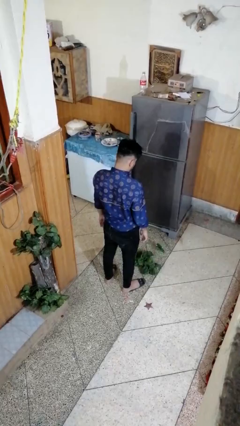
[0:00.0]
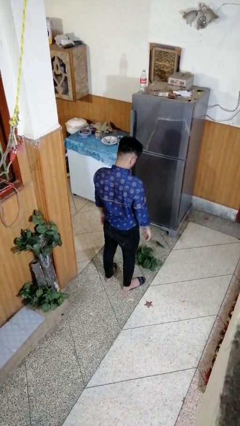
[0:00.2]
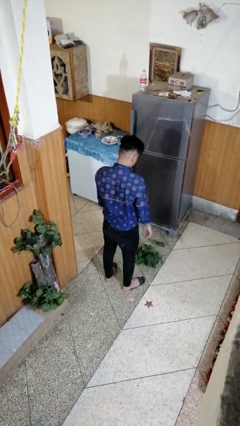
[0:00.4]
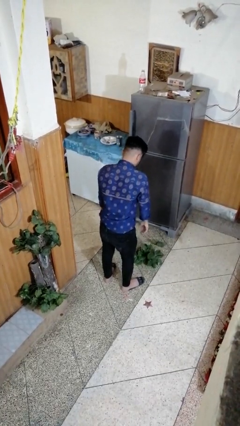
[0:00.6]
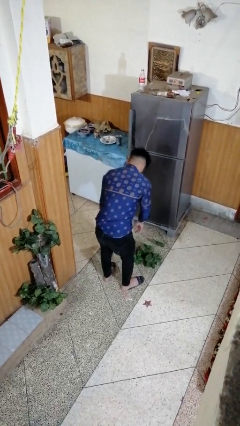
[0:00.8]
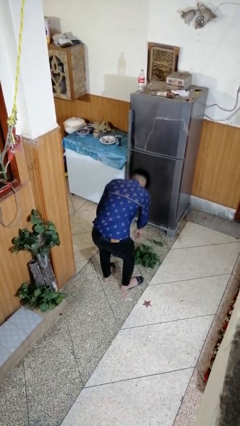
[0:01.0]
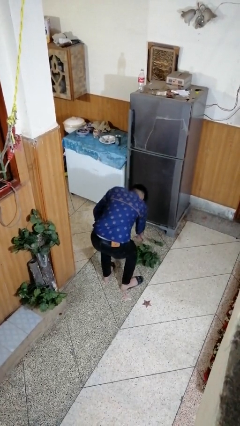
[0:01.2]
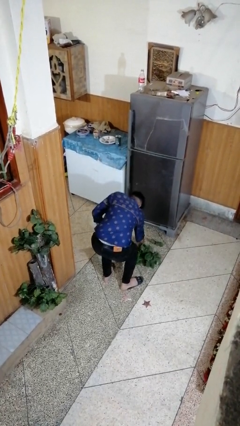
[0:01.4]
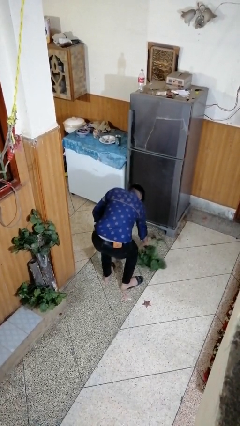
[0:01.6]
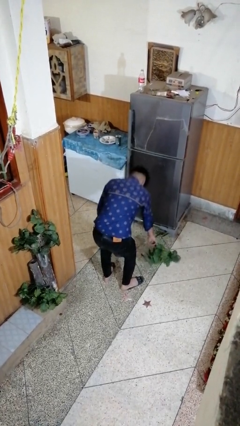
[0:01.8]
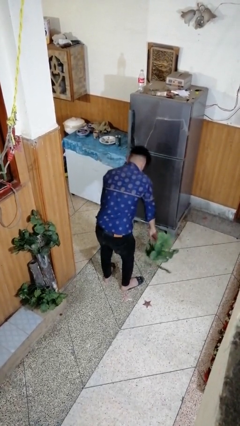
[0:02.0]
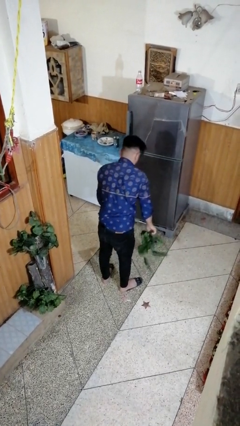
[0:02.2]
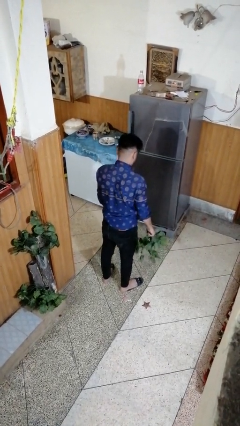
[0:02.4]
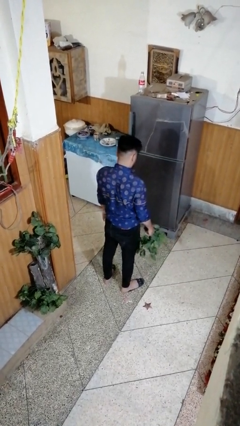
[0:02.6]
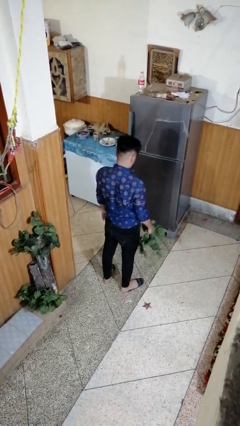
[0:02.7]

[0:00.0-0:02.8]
person picks up object from floor

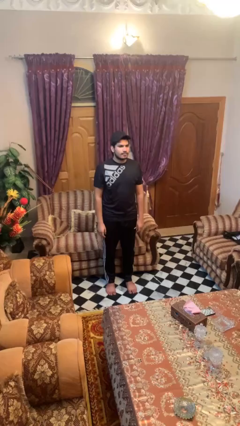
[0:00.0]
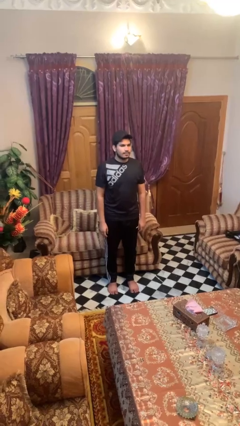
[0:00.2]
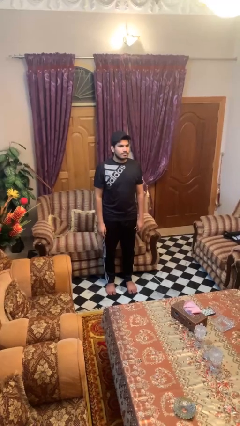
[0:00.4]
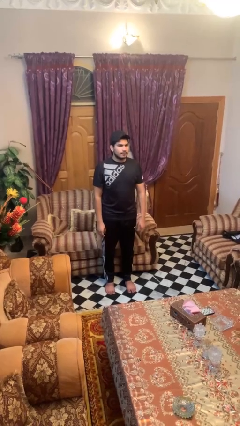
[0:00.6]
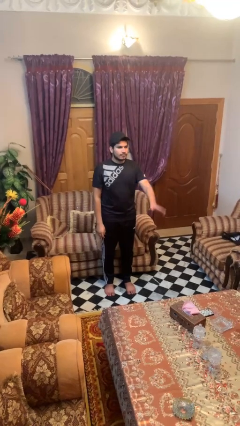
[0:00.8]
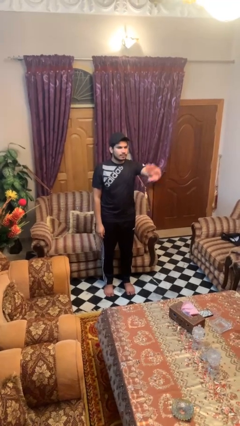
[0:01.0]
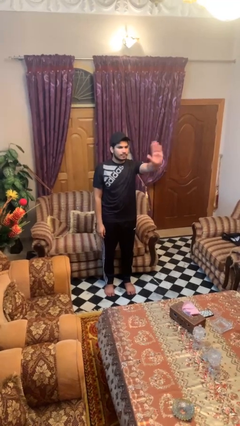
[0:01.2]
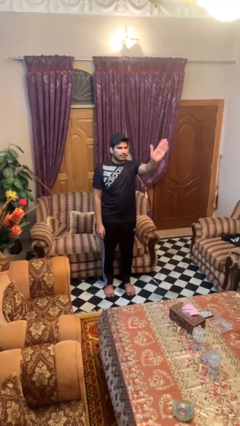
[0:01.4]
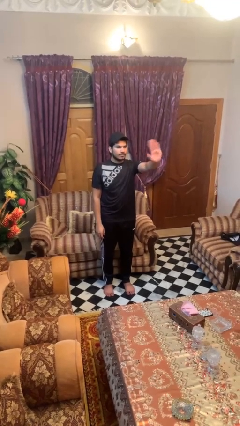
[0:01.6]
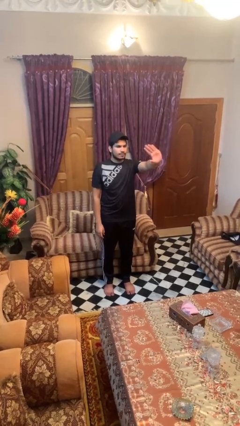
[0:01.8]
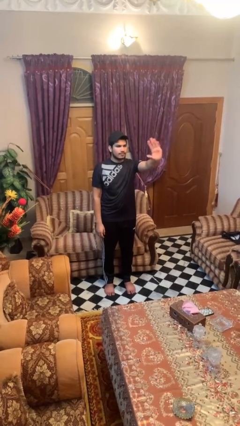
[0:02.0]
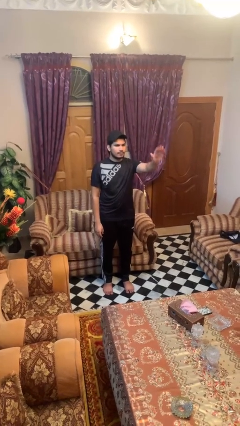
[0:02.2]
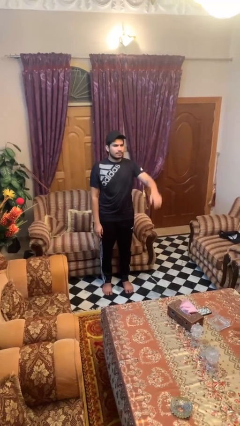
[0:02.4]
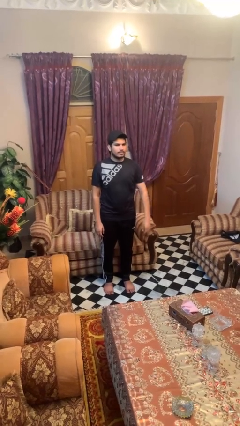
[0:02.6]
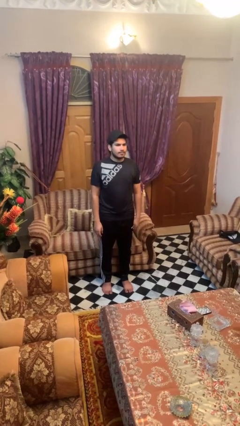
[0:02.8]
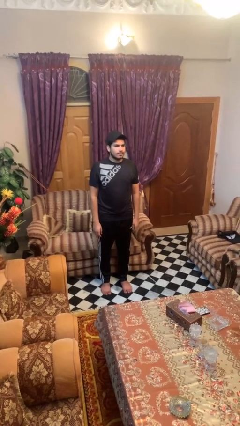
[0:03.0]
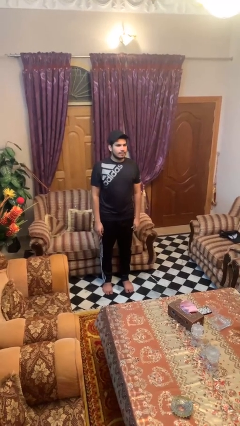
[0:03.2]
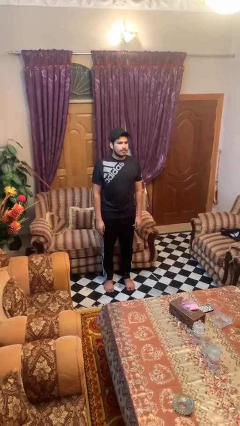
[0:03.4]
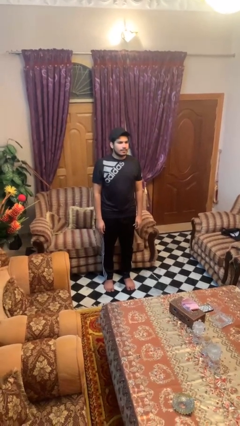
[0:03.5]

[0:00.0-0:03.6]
person waves at person

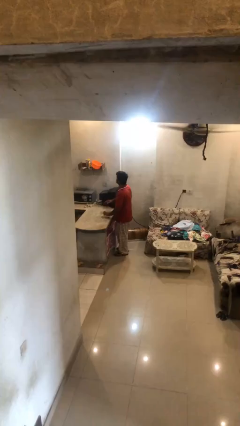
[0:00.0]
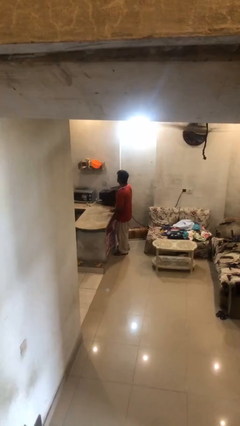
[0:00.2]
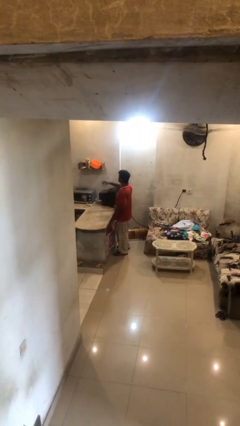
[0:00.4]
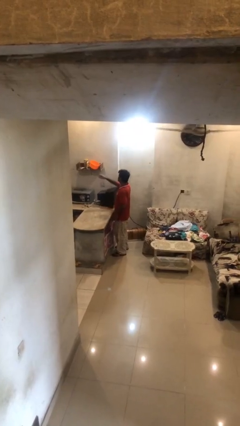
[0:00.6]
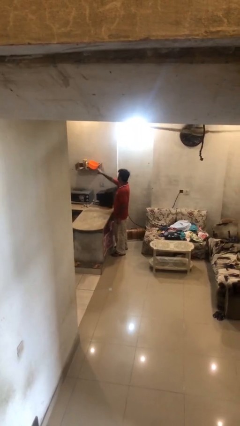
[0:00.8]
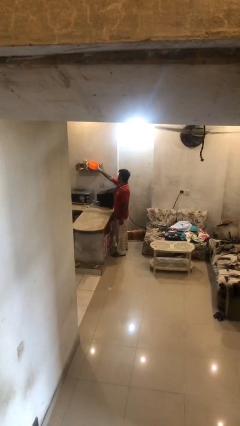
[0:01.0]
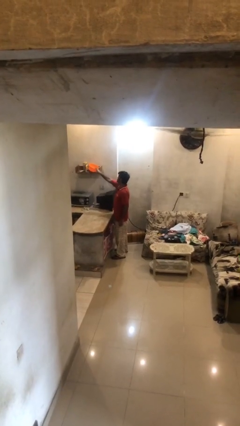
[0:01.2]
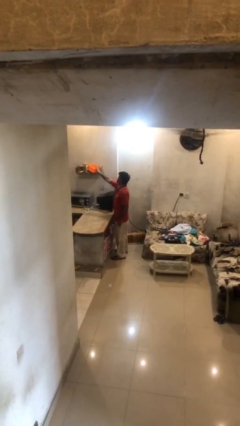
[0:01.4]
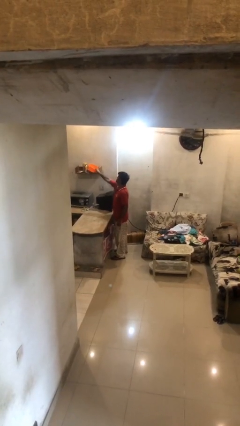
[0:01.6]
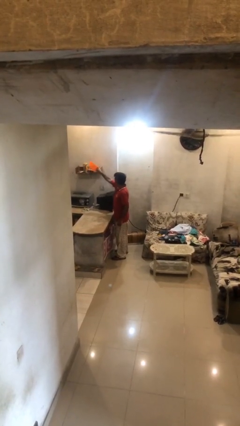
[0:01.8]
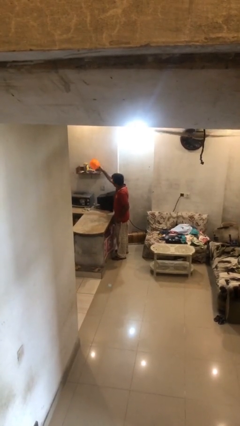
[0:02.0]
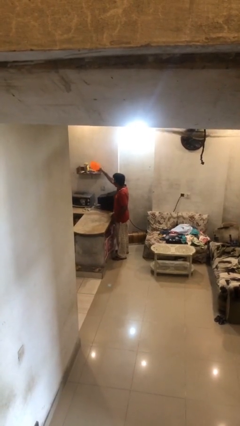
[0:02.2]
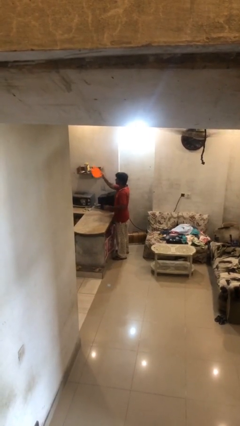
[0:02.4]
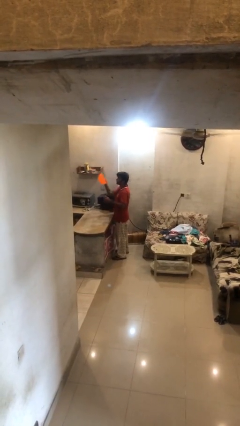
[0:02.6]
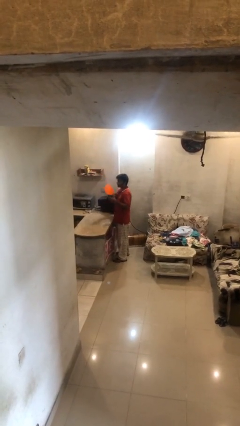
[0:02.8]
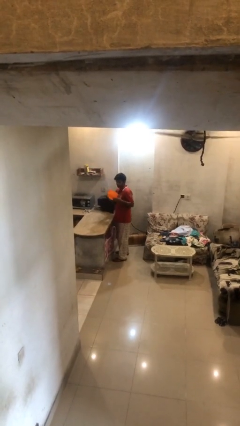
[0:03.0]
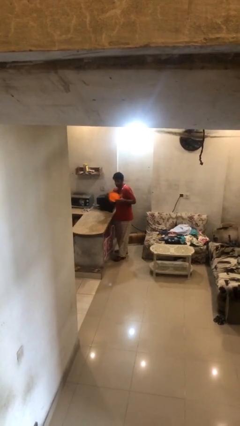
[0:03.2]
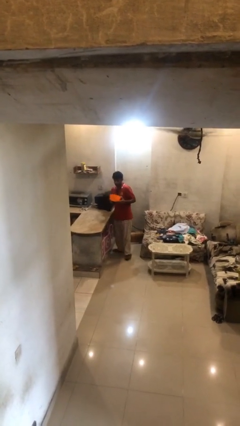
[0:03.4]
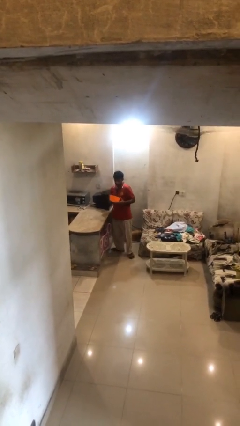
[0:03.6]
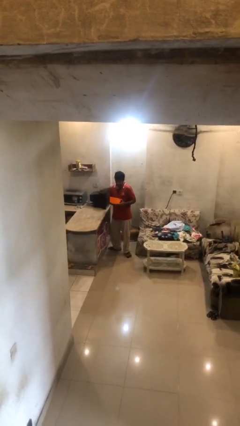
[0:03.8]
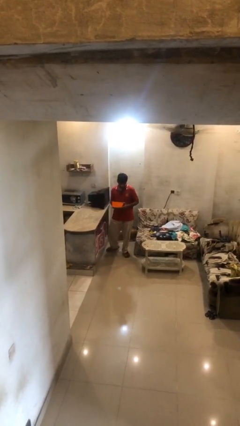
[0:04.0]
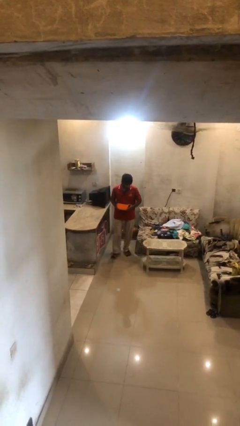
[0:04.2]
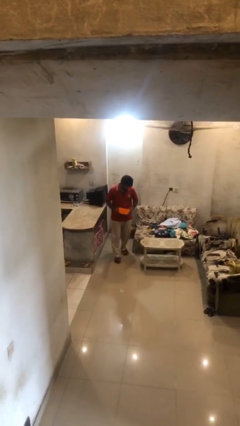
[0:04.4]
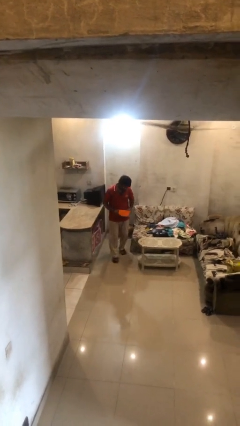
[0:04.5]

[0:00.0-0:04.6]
person picks up object from shelf

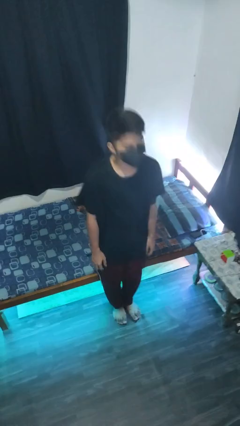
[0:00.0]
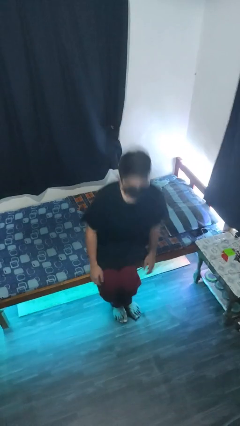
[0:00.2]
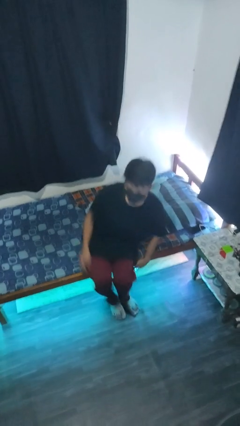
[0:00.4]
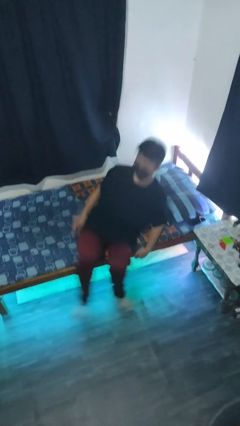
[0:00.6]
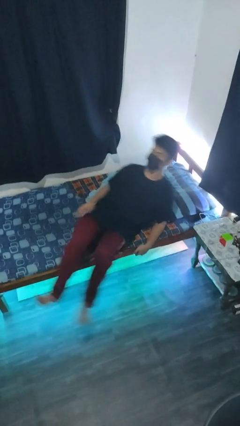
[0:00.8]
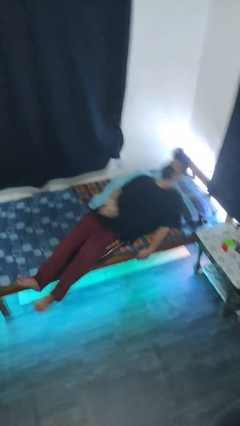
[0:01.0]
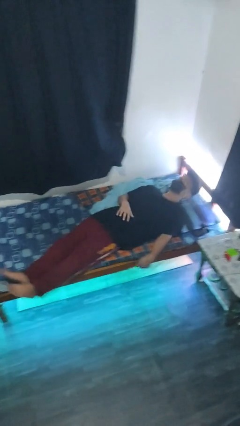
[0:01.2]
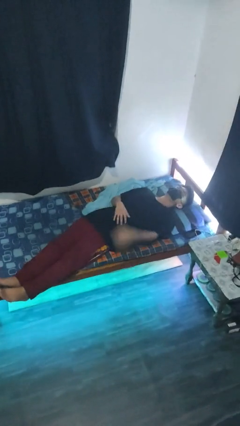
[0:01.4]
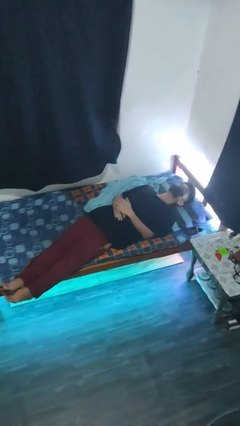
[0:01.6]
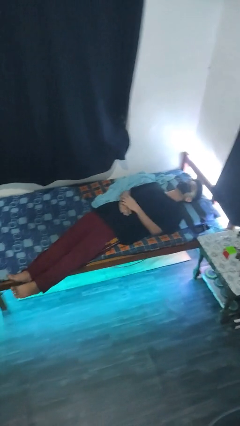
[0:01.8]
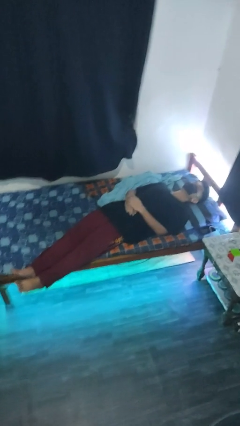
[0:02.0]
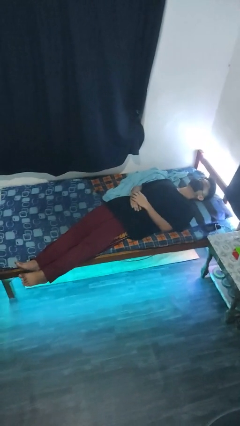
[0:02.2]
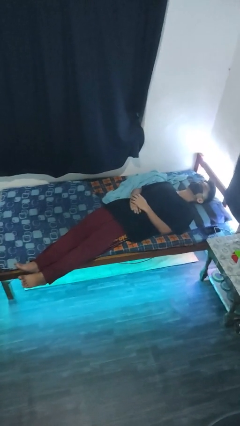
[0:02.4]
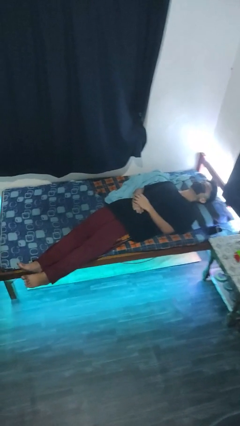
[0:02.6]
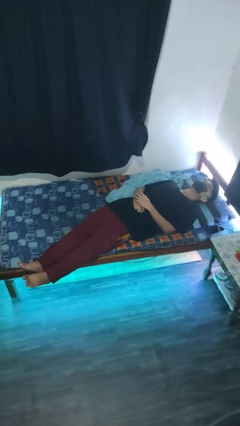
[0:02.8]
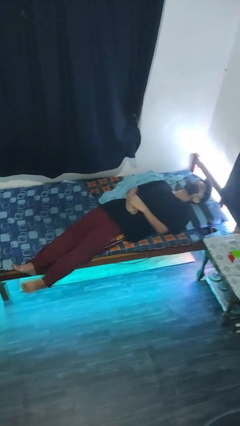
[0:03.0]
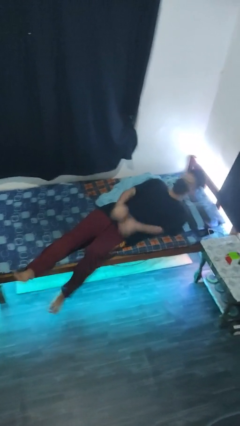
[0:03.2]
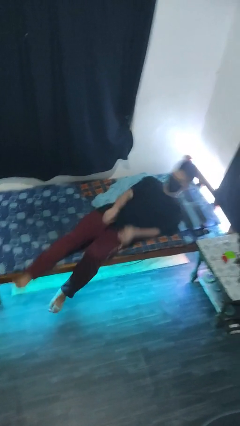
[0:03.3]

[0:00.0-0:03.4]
person lies down on bed

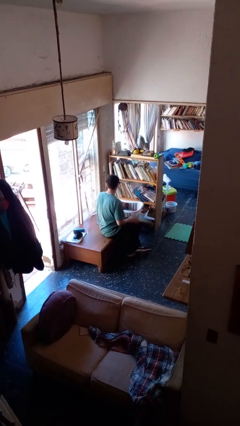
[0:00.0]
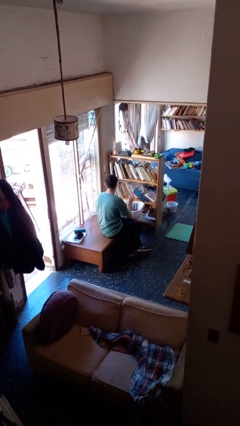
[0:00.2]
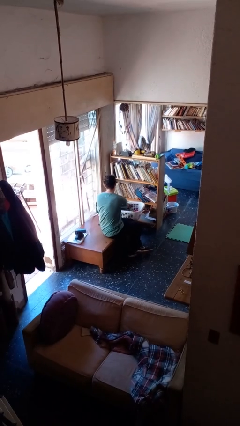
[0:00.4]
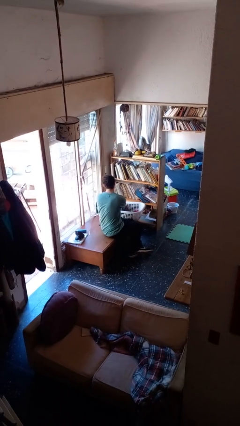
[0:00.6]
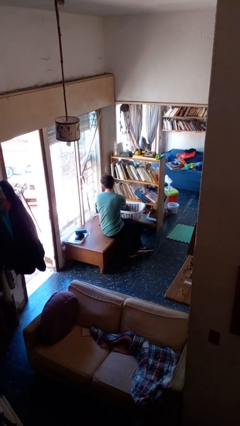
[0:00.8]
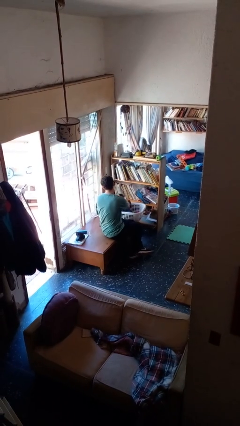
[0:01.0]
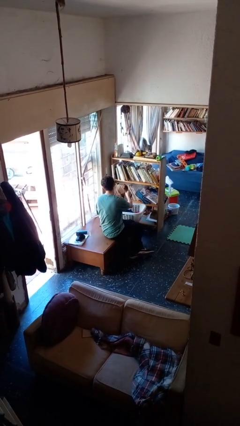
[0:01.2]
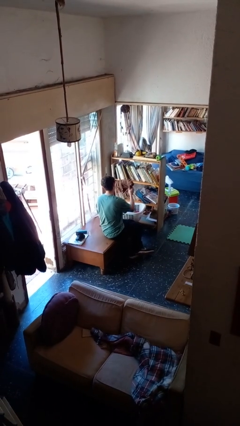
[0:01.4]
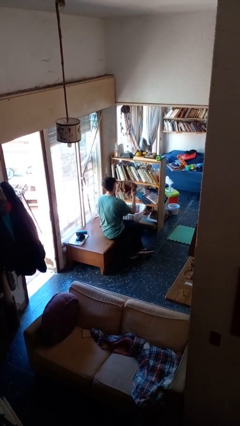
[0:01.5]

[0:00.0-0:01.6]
person takes object from basket

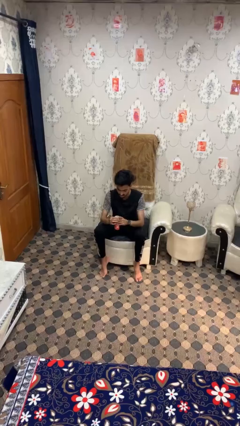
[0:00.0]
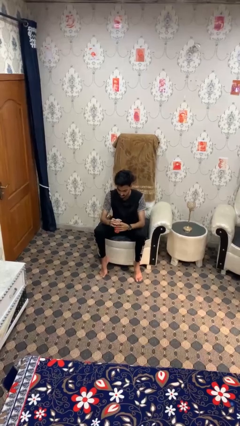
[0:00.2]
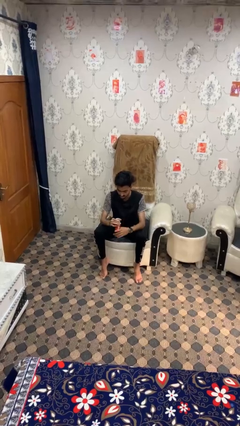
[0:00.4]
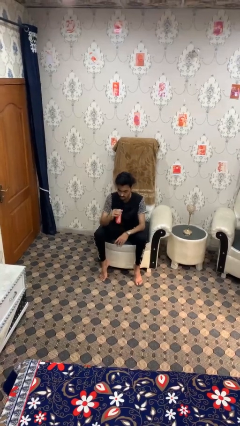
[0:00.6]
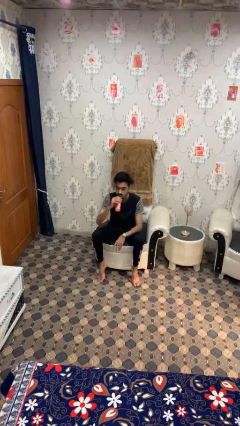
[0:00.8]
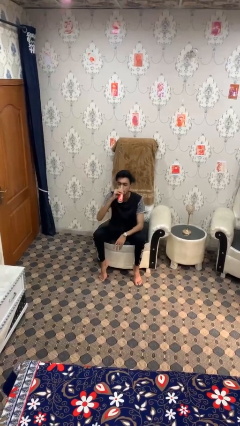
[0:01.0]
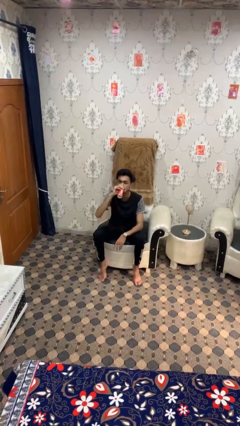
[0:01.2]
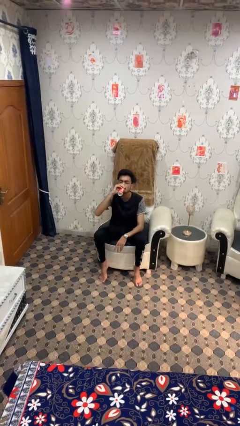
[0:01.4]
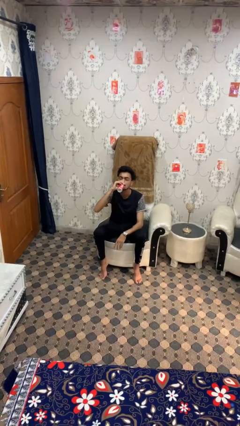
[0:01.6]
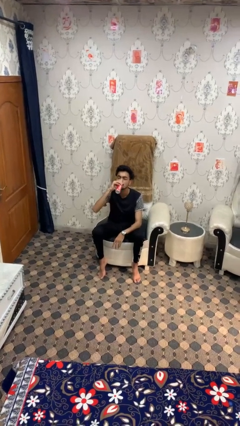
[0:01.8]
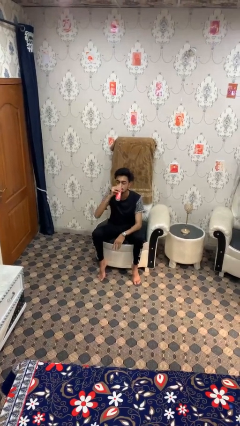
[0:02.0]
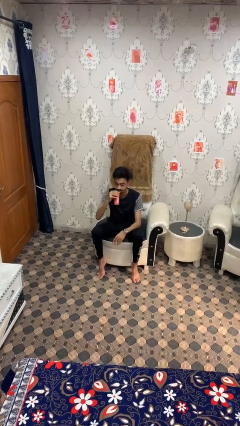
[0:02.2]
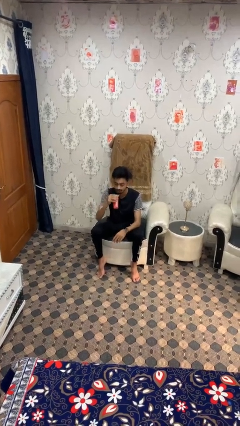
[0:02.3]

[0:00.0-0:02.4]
person drinks from beverage can
